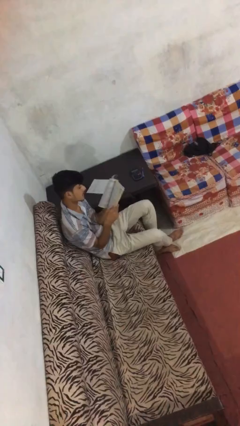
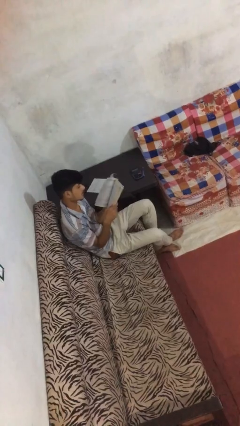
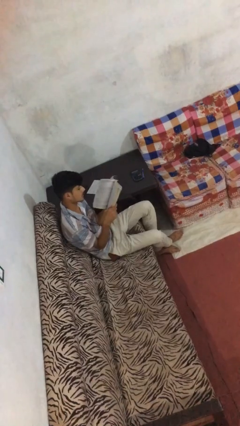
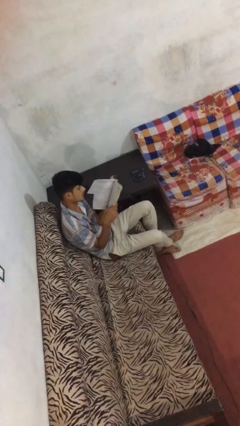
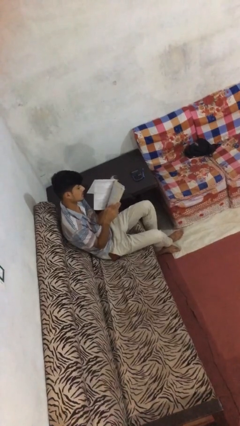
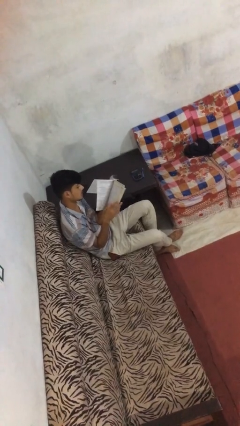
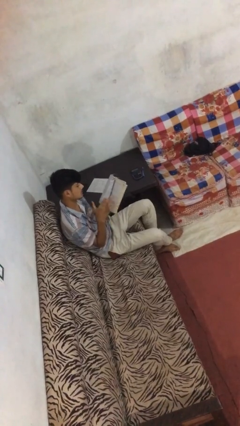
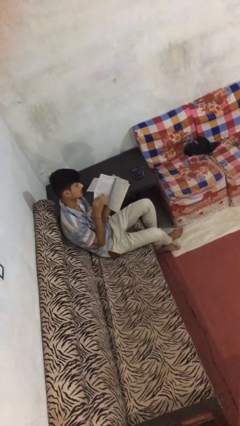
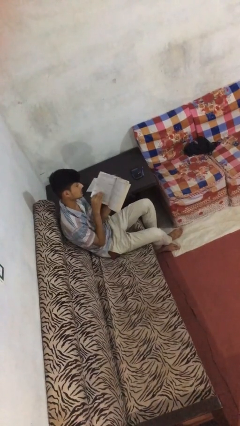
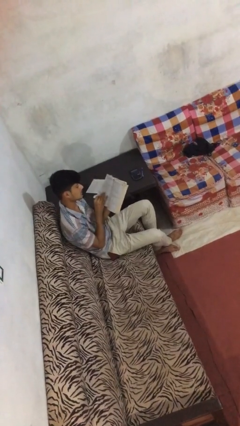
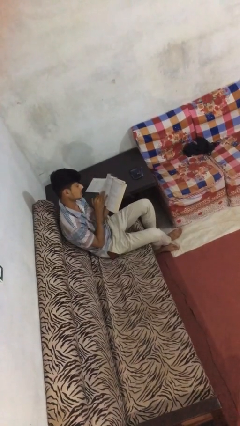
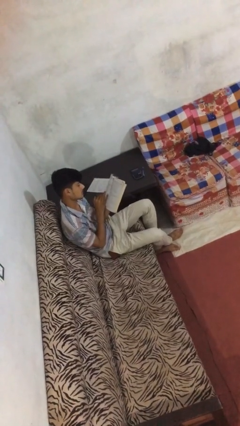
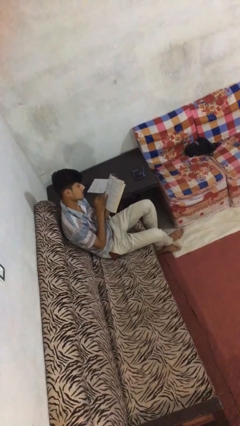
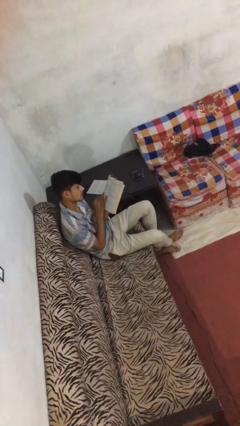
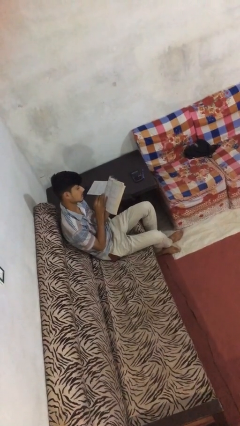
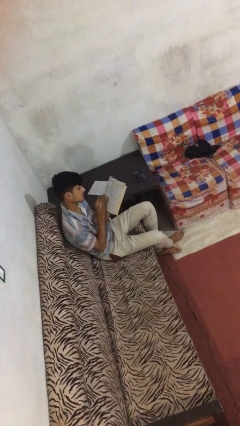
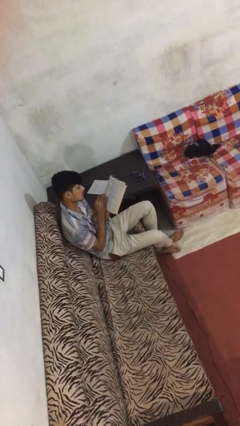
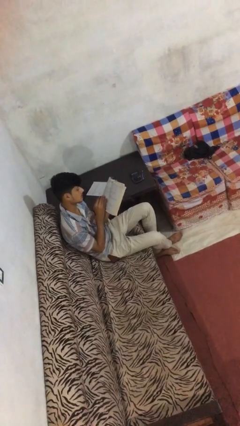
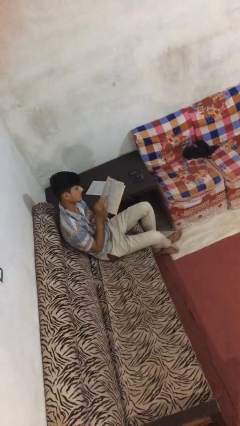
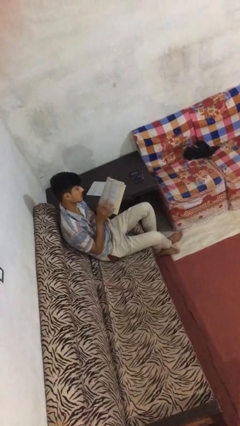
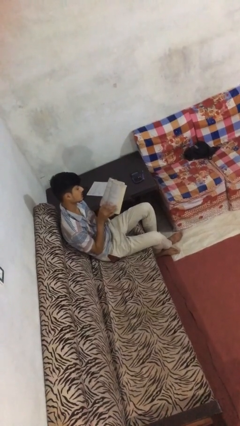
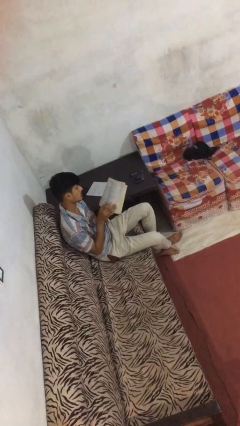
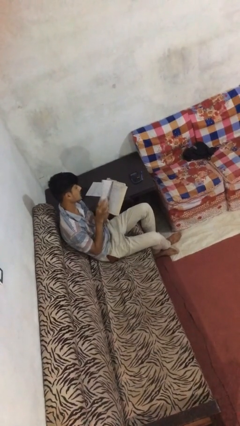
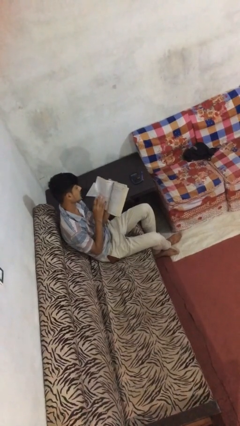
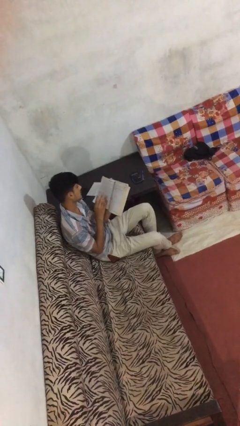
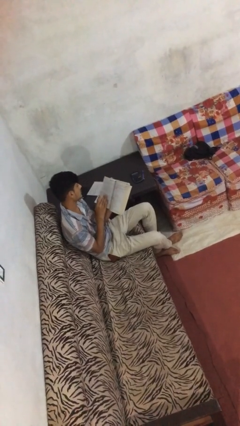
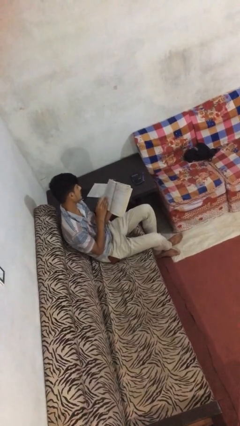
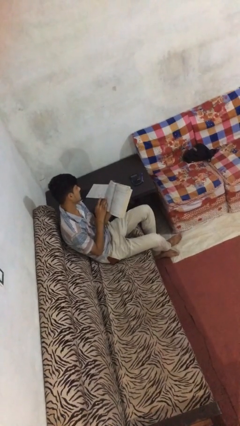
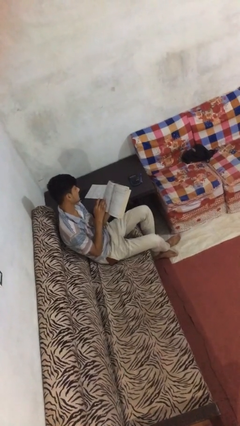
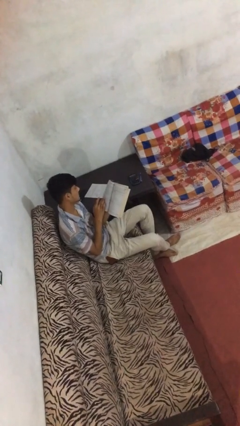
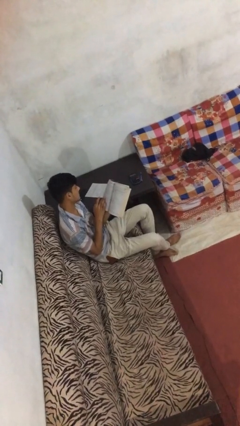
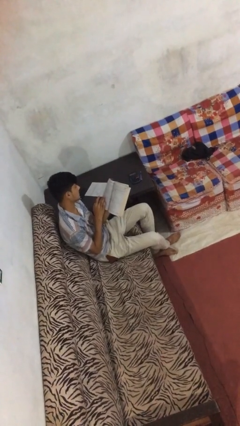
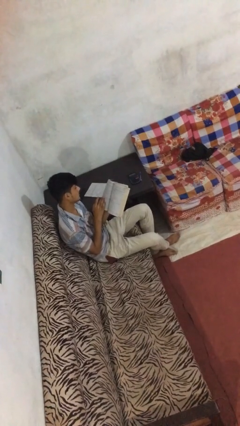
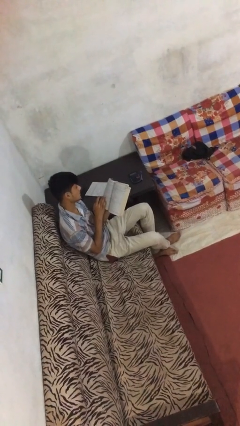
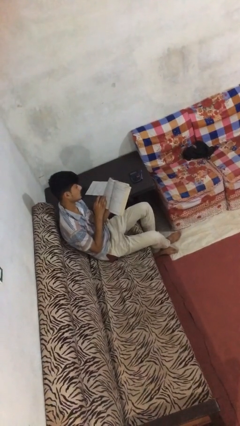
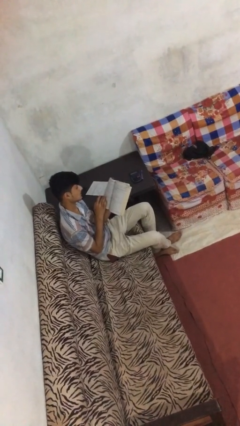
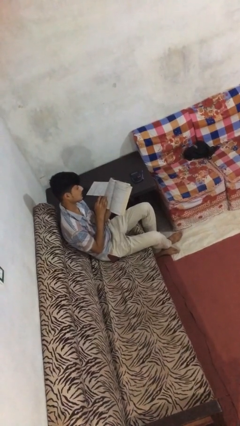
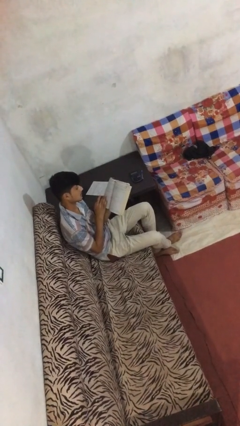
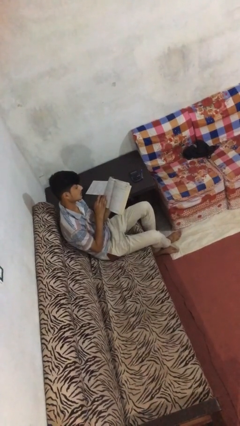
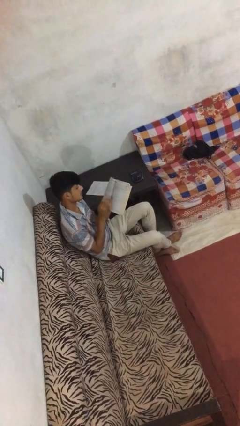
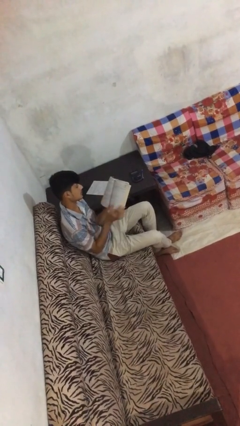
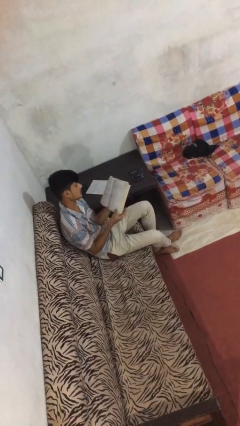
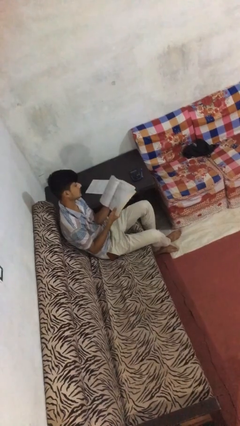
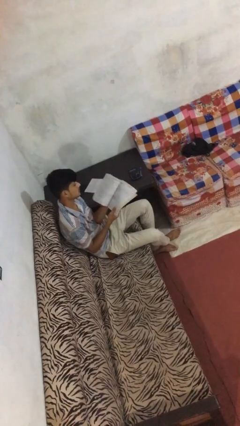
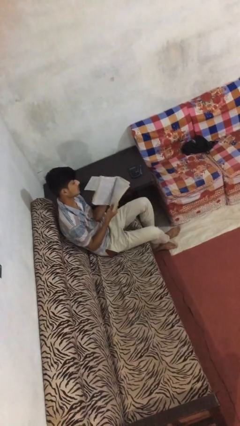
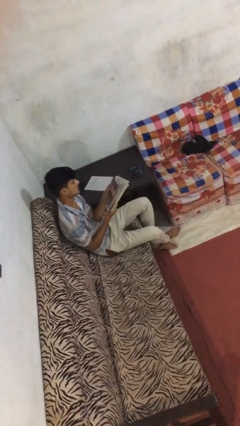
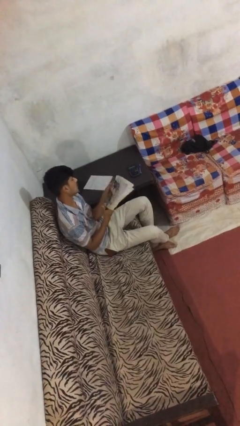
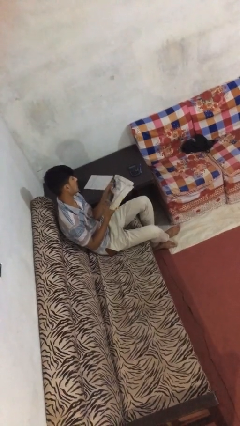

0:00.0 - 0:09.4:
person reads document

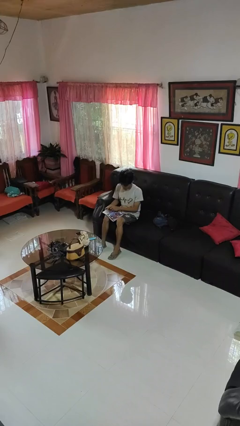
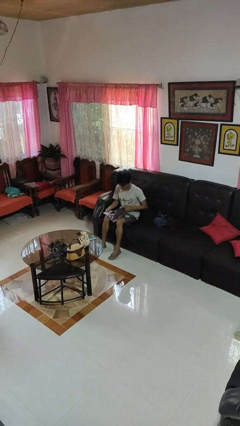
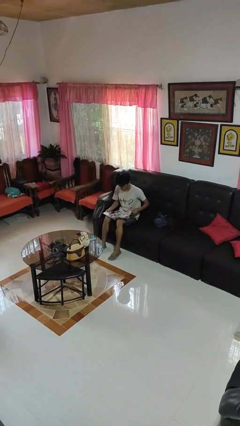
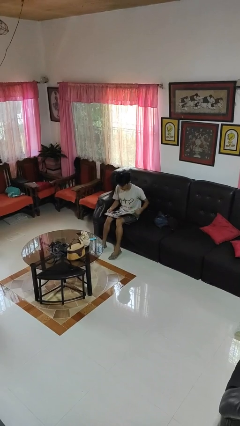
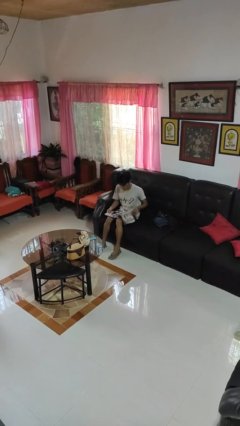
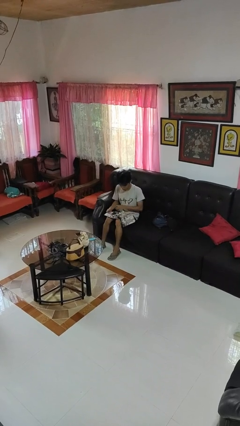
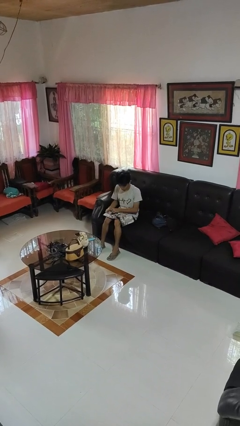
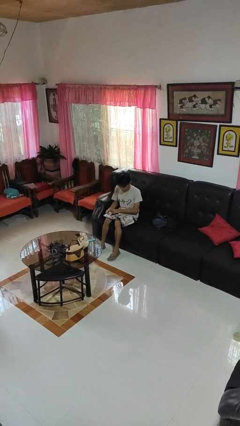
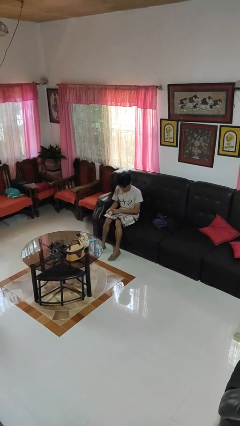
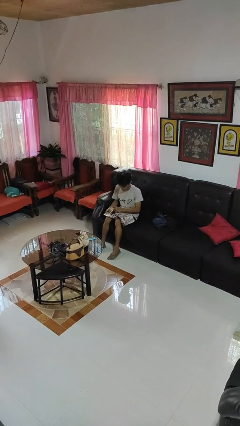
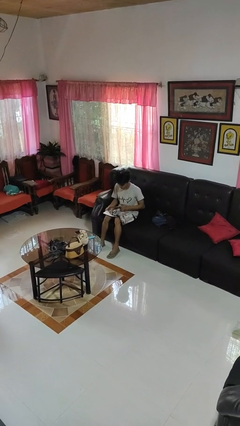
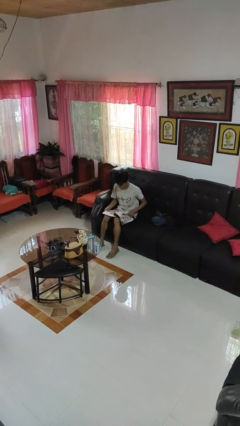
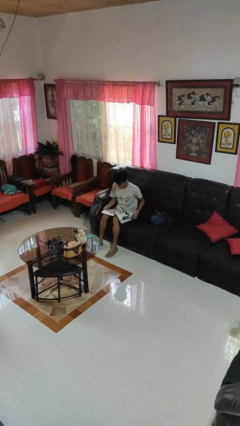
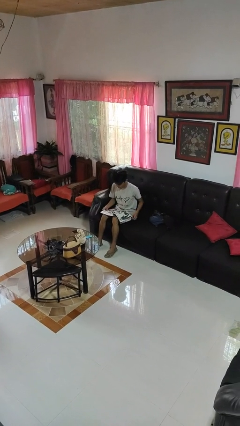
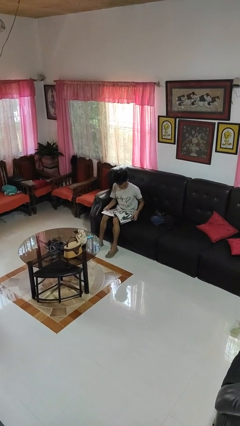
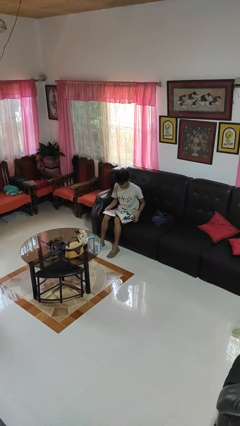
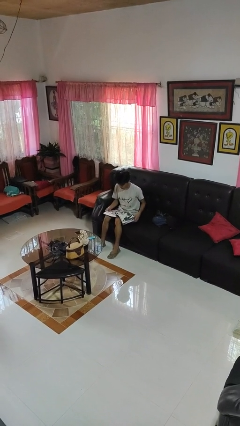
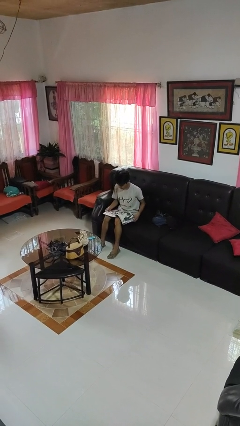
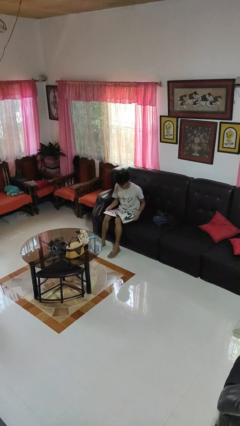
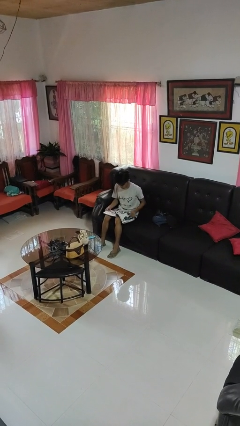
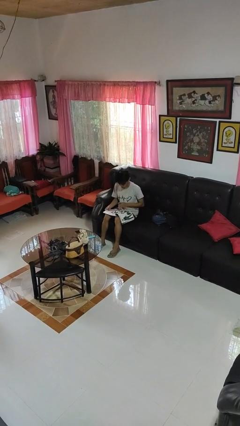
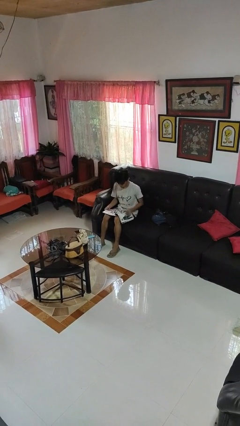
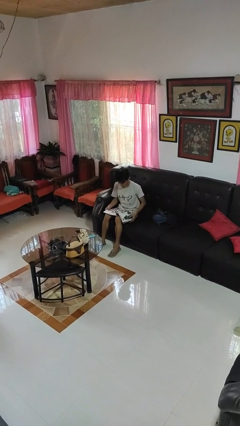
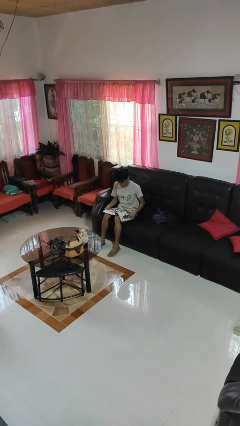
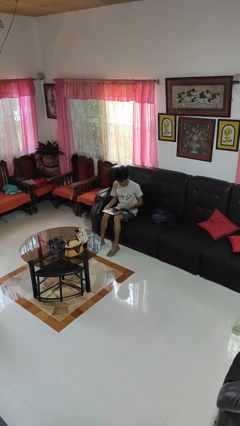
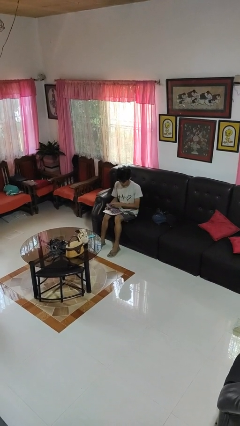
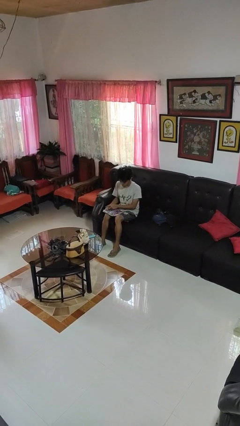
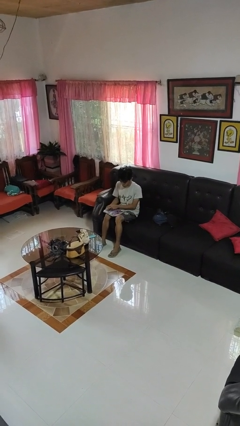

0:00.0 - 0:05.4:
person reads magazine

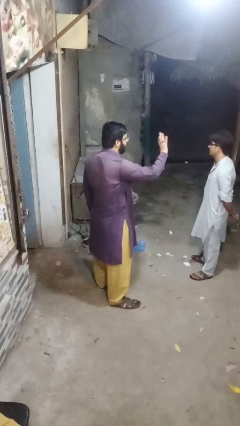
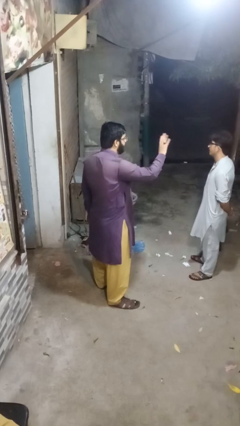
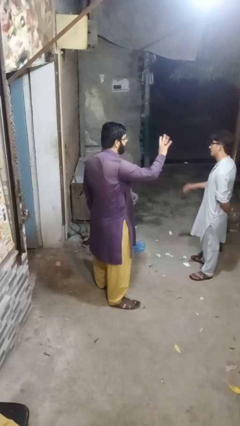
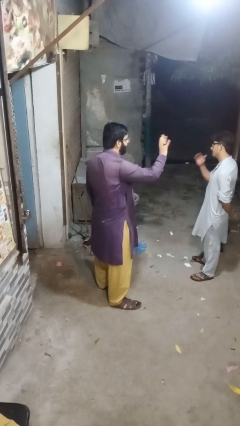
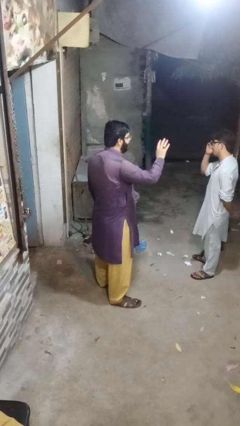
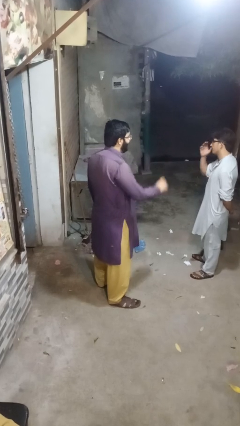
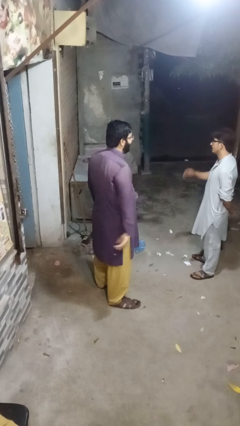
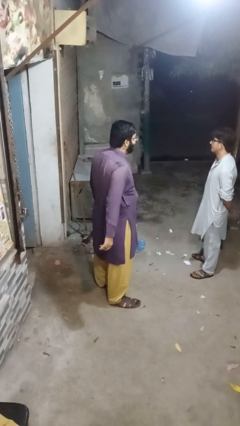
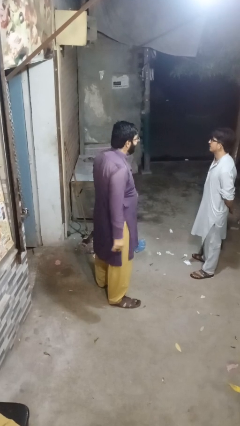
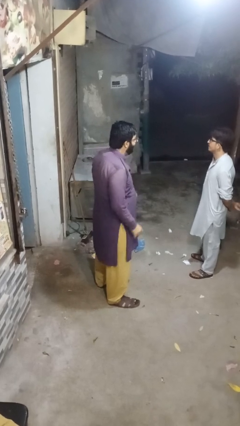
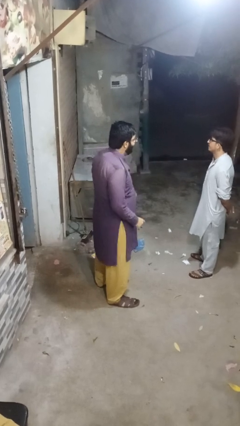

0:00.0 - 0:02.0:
person waves at person

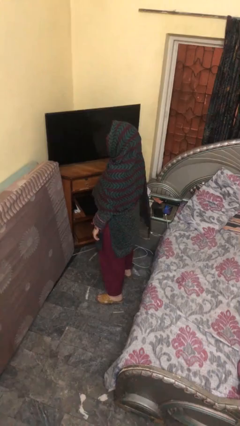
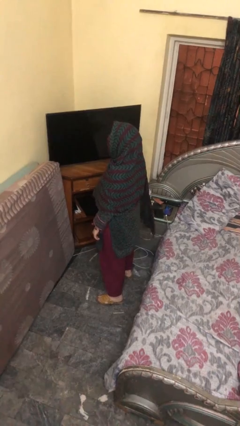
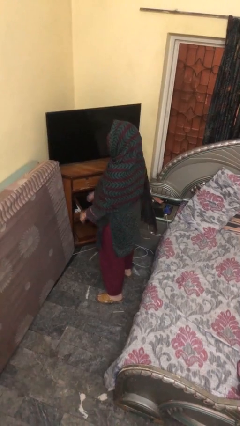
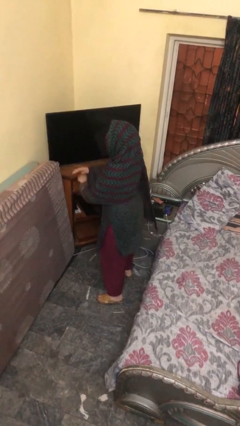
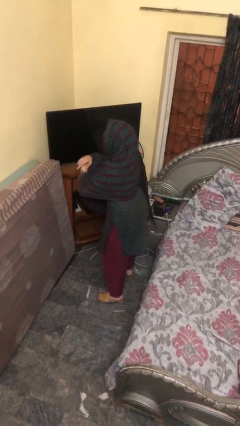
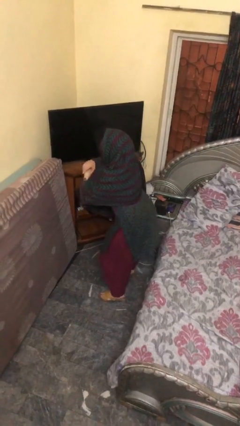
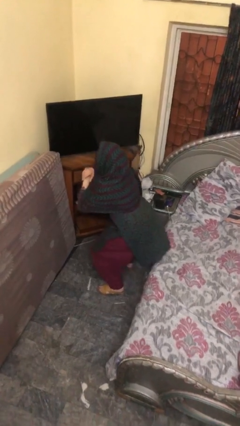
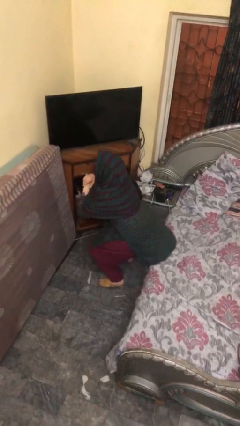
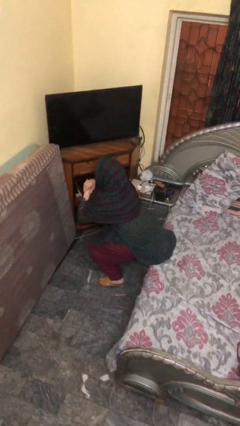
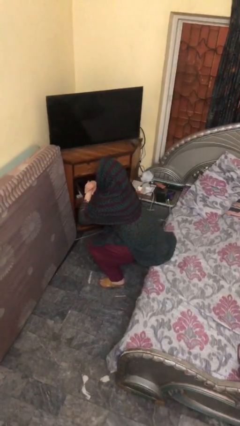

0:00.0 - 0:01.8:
person squats
